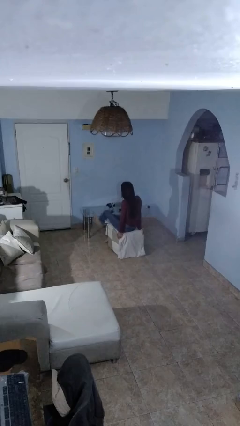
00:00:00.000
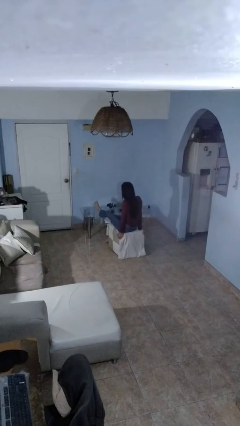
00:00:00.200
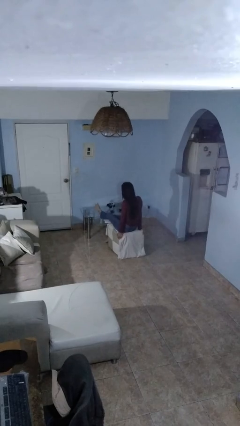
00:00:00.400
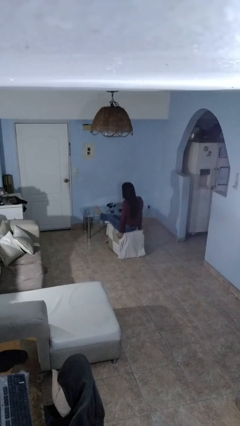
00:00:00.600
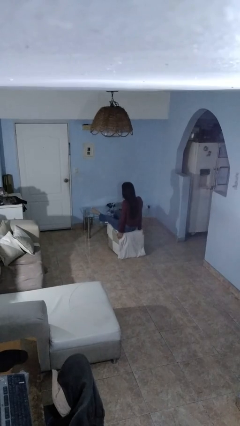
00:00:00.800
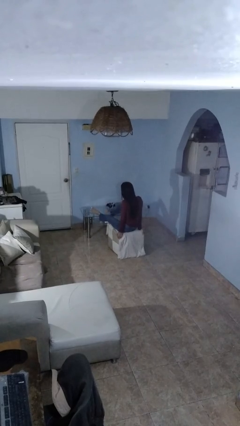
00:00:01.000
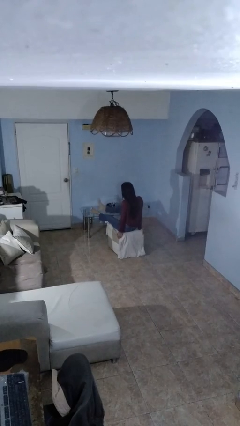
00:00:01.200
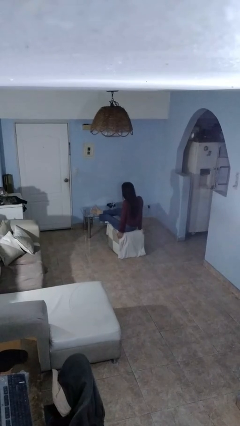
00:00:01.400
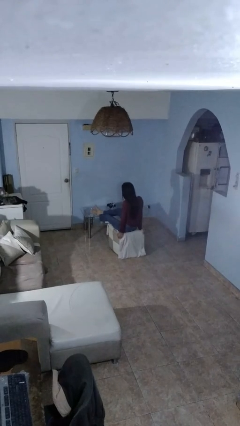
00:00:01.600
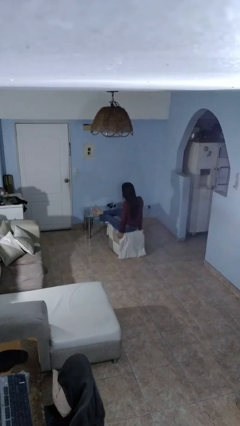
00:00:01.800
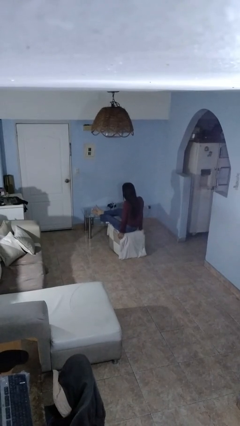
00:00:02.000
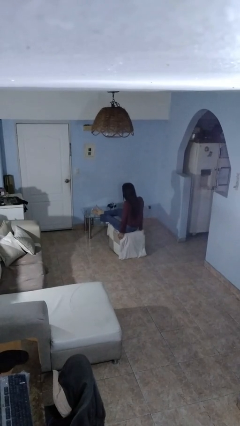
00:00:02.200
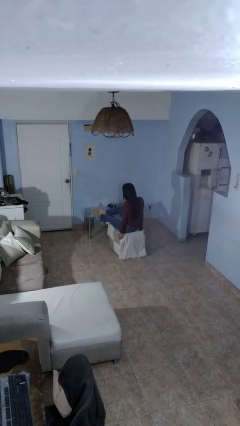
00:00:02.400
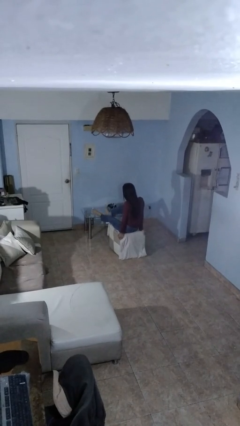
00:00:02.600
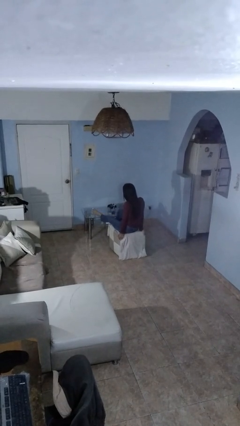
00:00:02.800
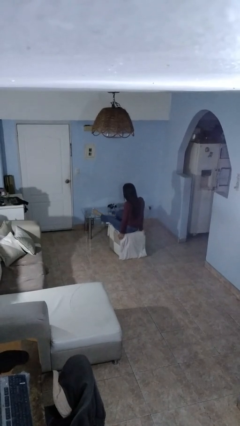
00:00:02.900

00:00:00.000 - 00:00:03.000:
person puts feet up

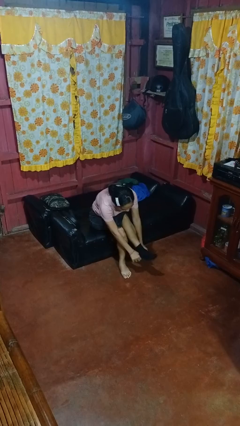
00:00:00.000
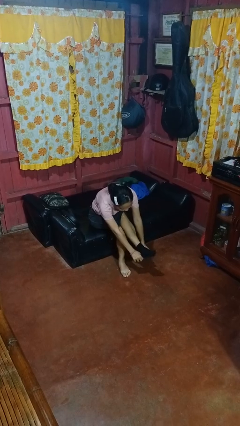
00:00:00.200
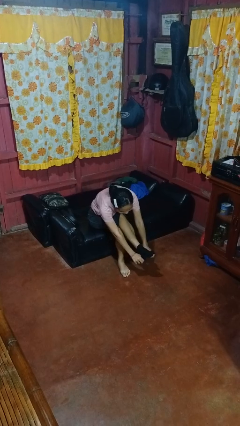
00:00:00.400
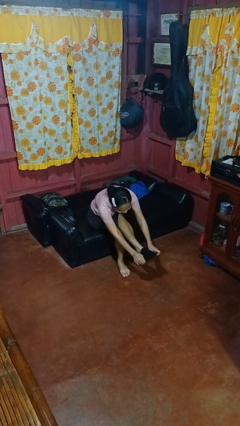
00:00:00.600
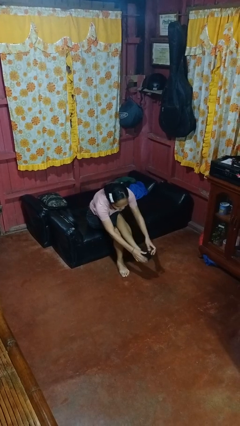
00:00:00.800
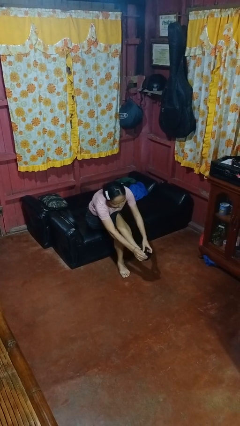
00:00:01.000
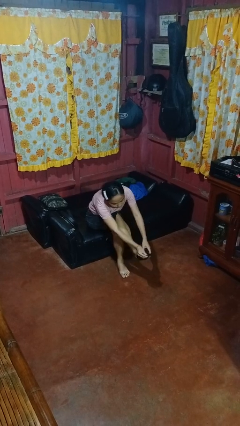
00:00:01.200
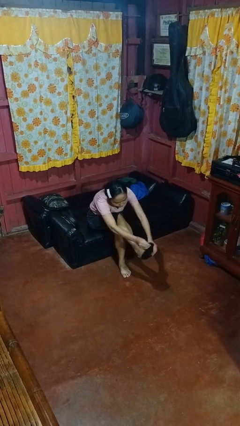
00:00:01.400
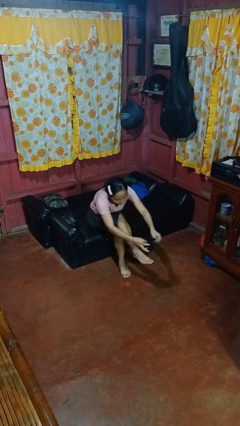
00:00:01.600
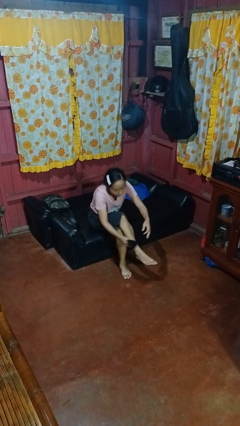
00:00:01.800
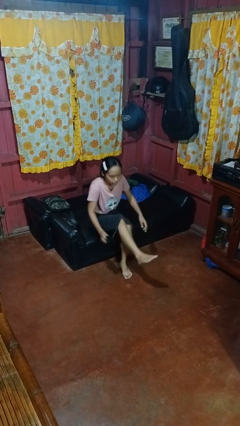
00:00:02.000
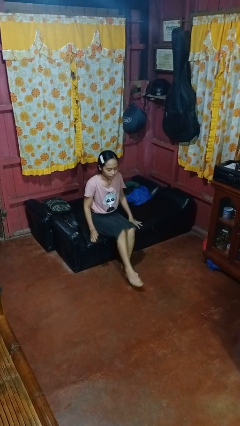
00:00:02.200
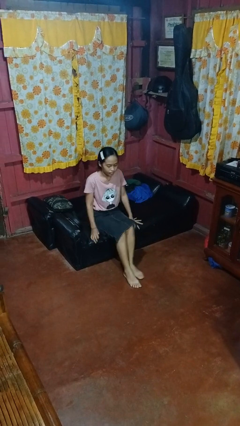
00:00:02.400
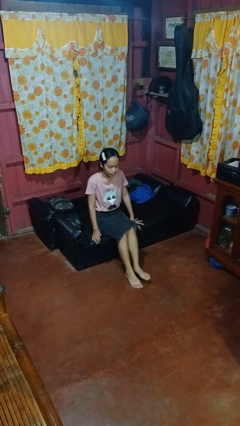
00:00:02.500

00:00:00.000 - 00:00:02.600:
person takes off socks

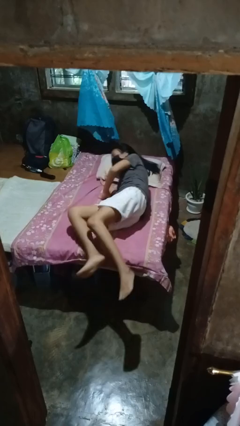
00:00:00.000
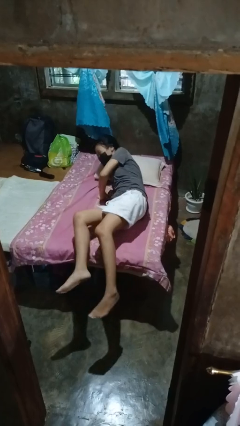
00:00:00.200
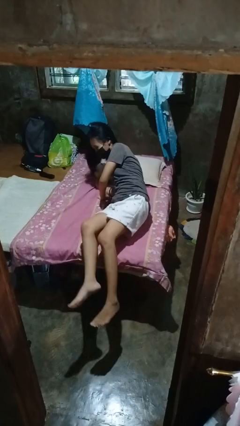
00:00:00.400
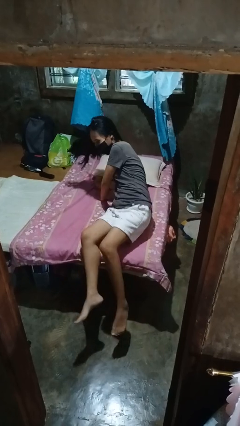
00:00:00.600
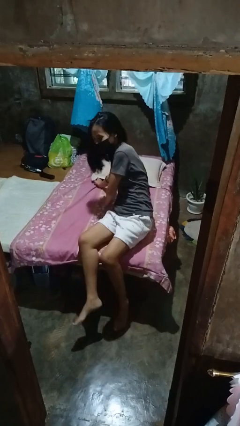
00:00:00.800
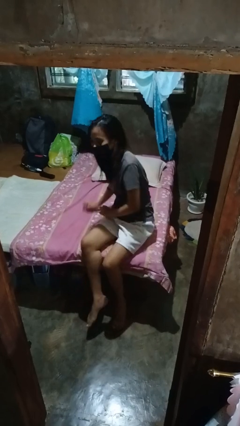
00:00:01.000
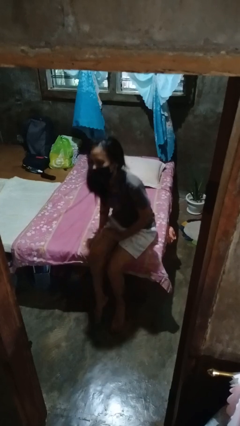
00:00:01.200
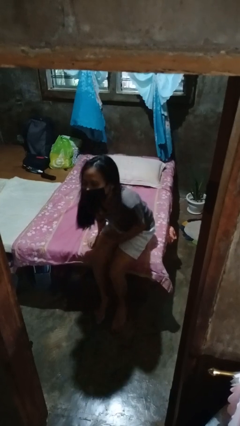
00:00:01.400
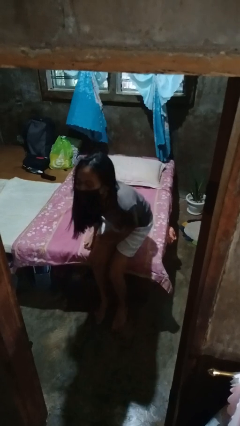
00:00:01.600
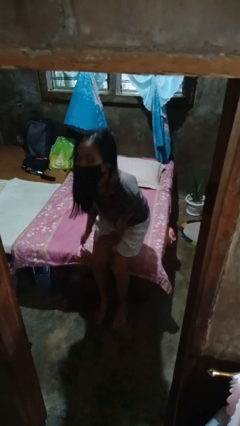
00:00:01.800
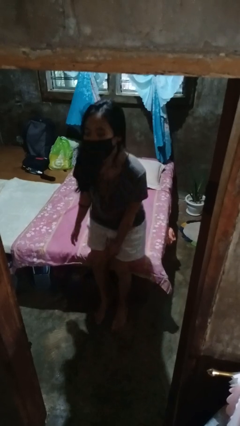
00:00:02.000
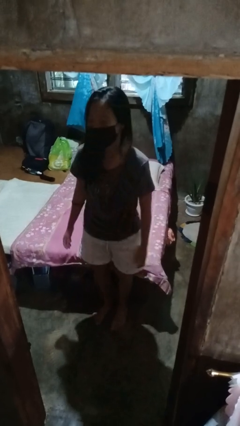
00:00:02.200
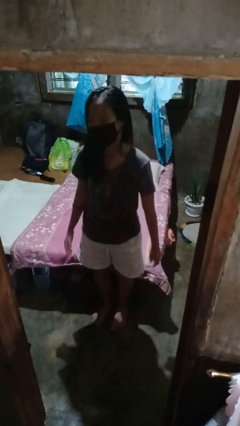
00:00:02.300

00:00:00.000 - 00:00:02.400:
person stands up

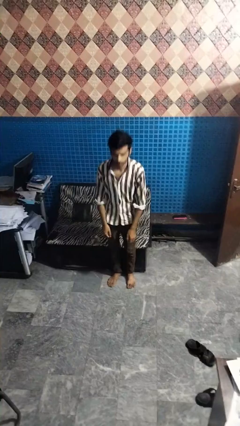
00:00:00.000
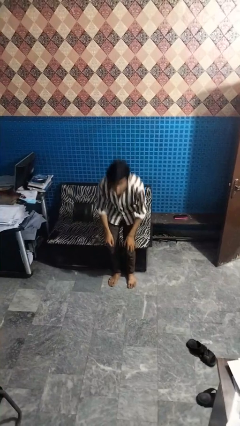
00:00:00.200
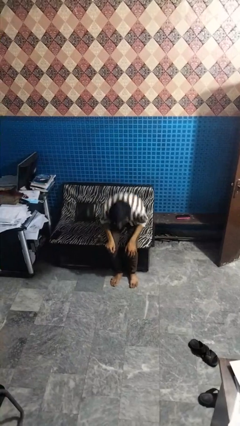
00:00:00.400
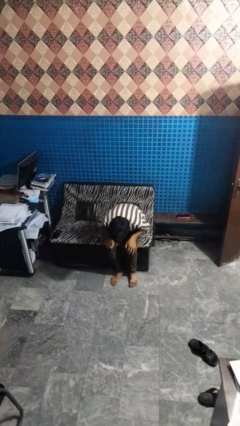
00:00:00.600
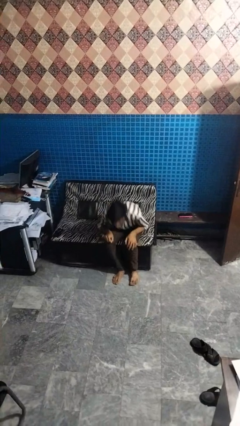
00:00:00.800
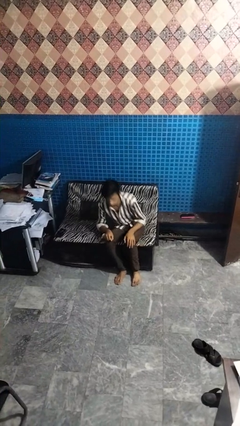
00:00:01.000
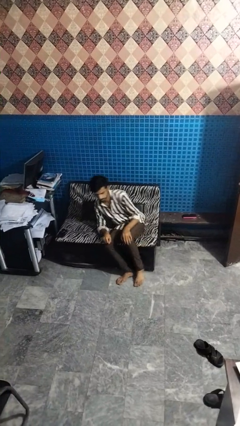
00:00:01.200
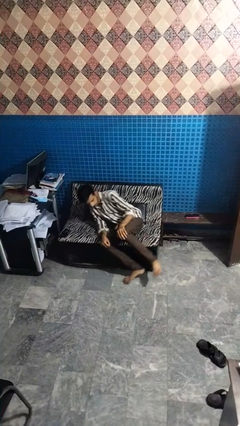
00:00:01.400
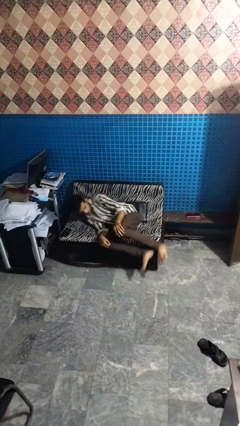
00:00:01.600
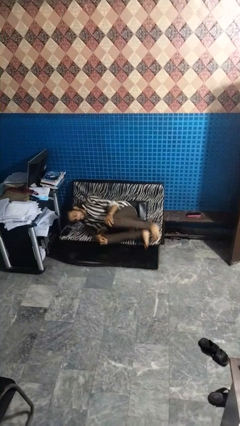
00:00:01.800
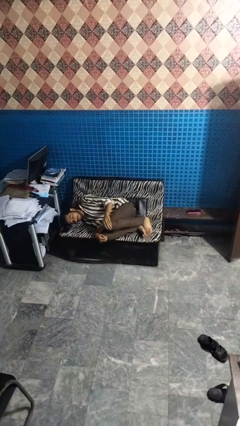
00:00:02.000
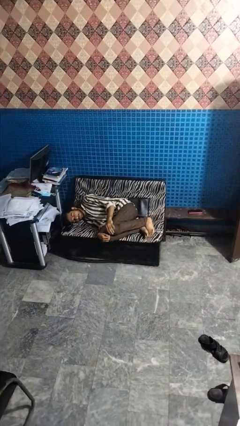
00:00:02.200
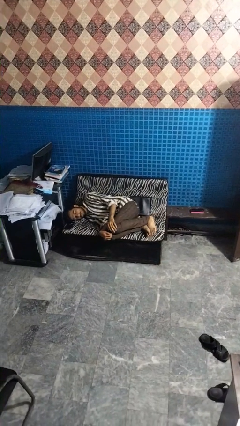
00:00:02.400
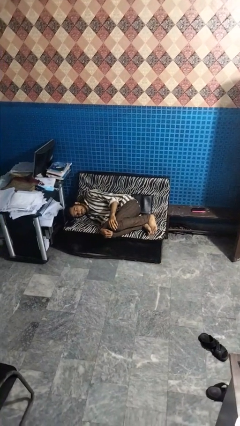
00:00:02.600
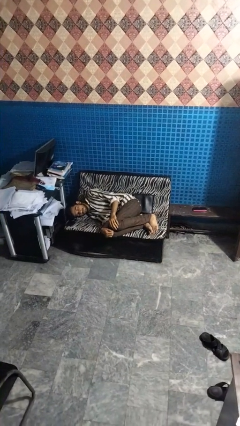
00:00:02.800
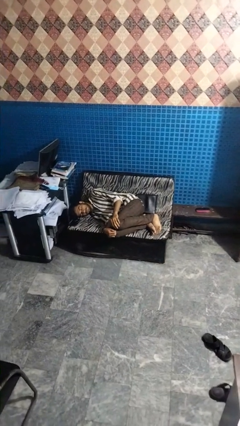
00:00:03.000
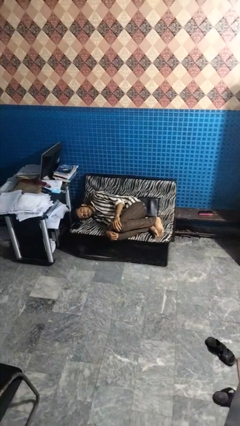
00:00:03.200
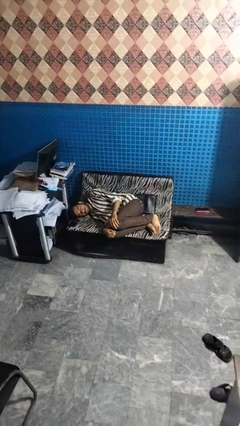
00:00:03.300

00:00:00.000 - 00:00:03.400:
person lies down on couch

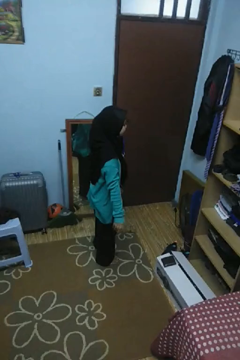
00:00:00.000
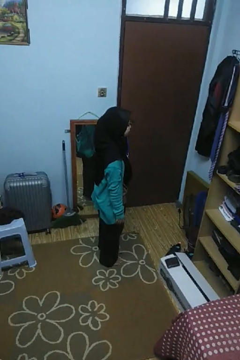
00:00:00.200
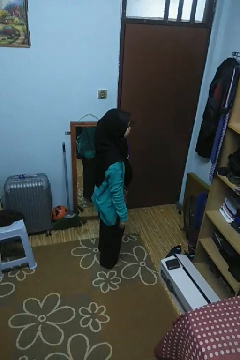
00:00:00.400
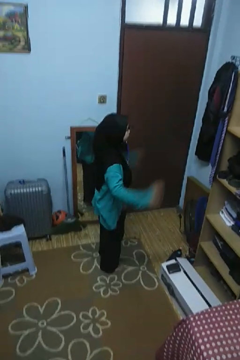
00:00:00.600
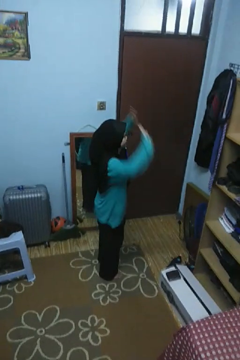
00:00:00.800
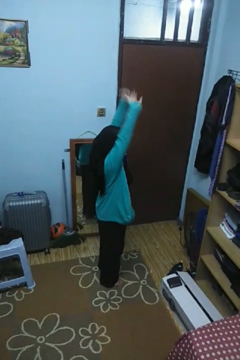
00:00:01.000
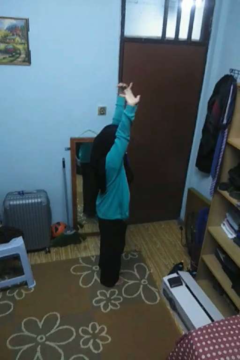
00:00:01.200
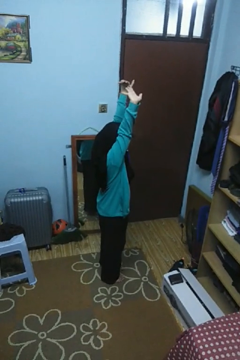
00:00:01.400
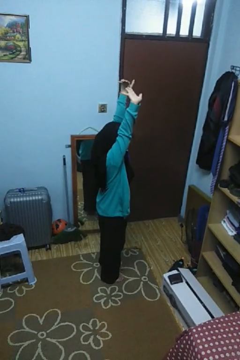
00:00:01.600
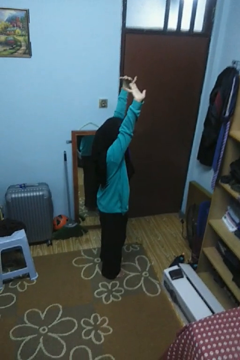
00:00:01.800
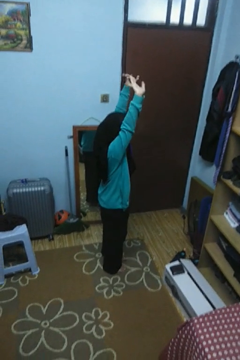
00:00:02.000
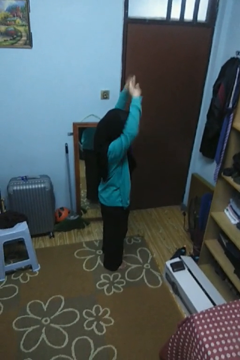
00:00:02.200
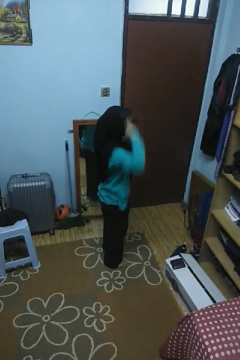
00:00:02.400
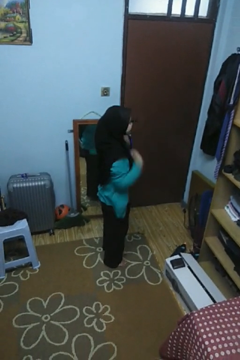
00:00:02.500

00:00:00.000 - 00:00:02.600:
person stretches arms over head

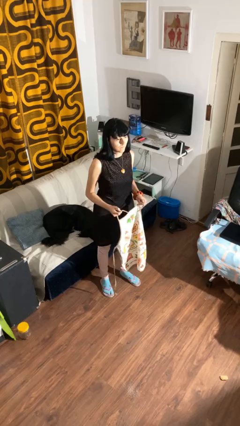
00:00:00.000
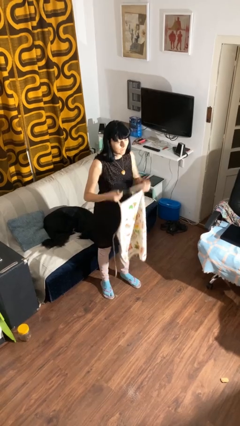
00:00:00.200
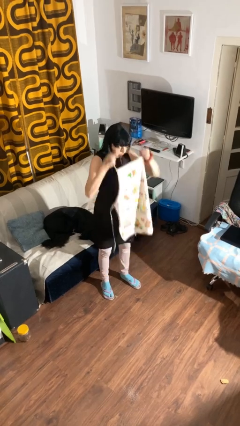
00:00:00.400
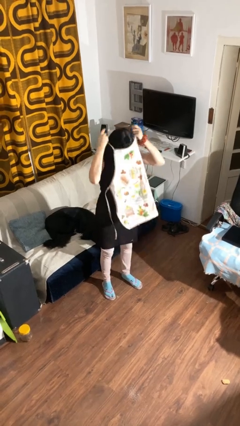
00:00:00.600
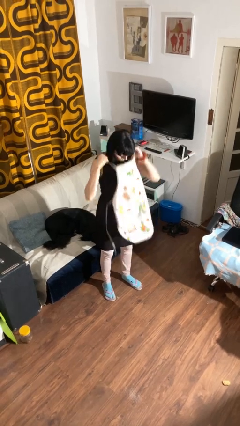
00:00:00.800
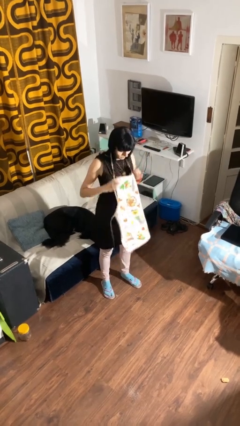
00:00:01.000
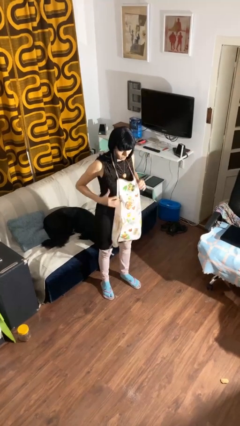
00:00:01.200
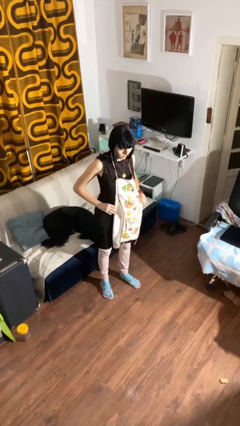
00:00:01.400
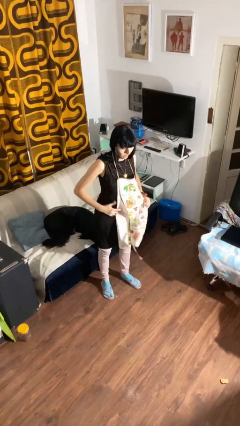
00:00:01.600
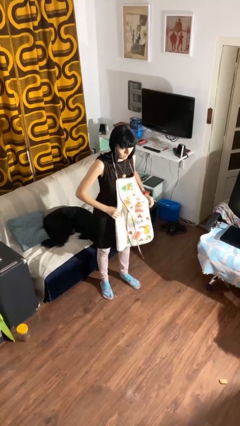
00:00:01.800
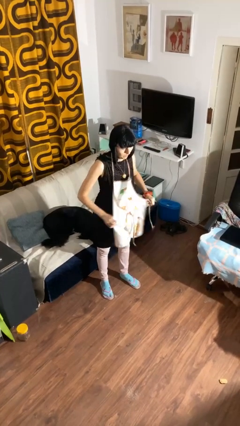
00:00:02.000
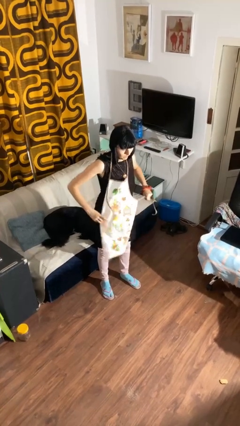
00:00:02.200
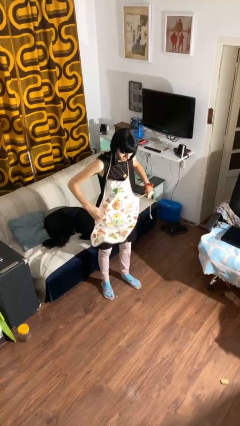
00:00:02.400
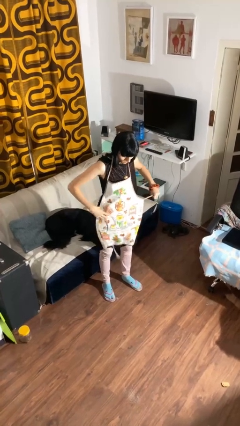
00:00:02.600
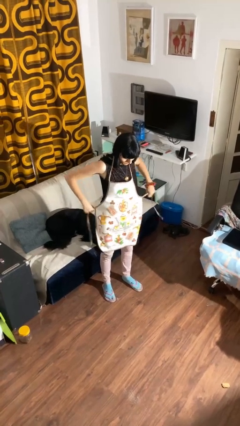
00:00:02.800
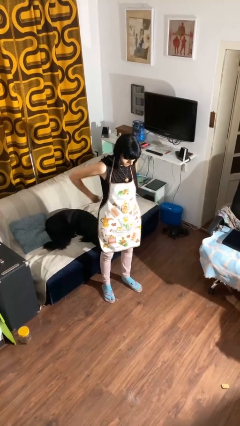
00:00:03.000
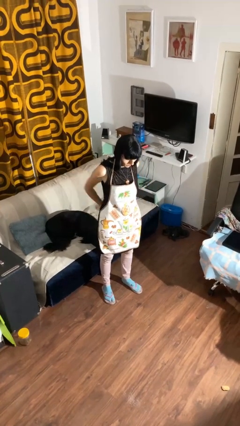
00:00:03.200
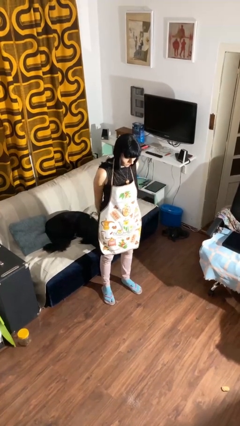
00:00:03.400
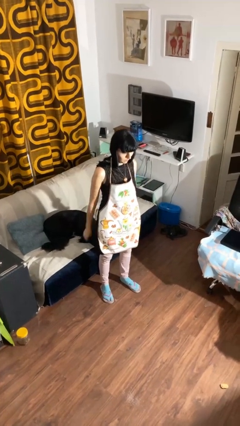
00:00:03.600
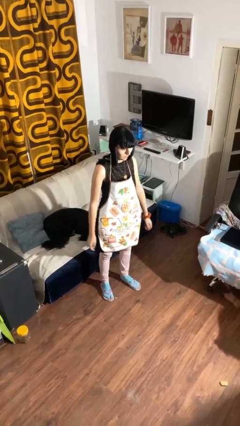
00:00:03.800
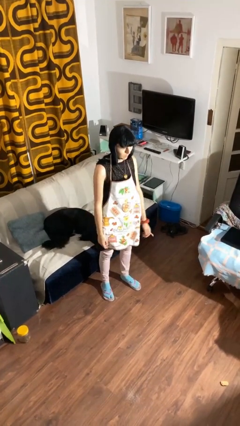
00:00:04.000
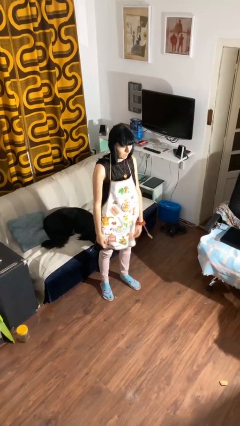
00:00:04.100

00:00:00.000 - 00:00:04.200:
person puts on apron
